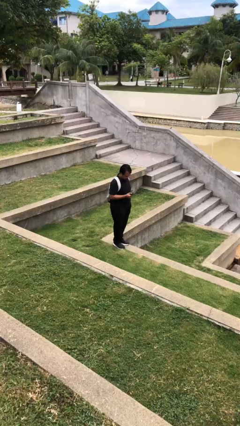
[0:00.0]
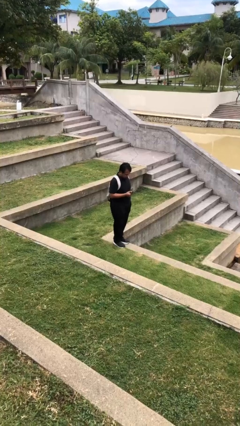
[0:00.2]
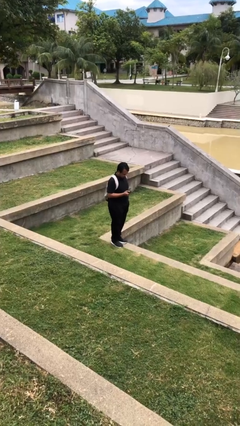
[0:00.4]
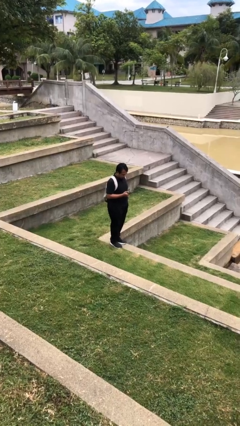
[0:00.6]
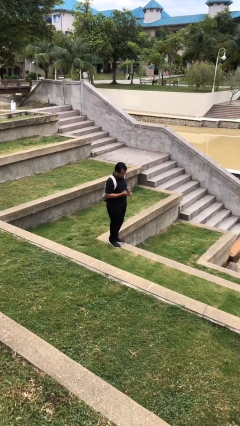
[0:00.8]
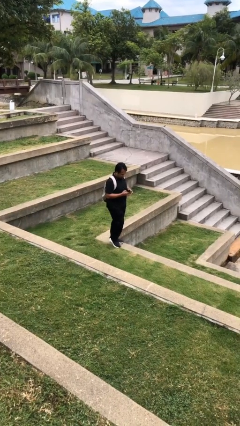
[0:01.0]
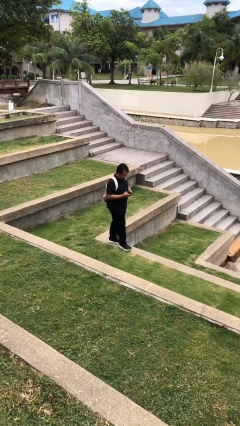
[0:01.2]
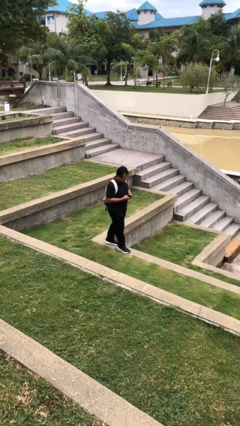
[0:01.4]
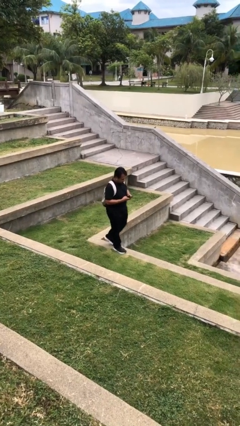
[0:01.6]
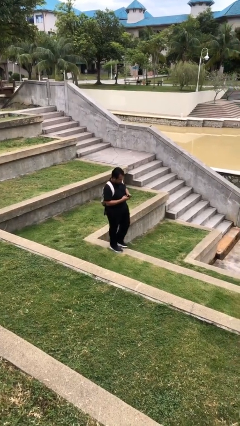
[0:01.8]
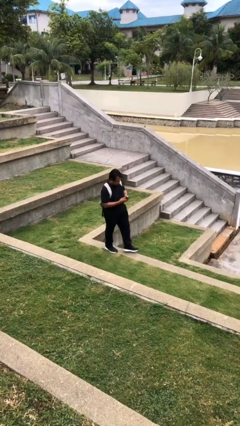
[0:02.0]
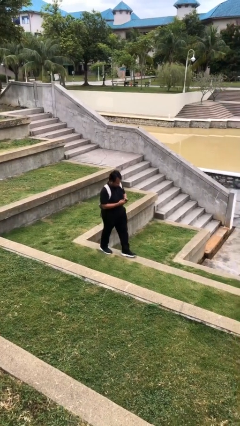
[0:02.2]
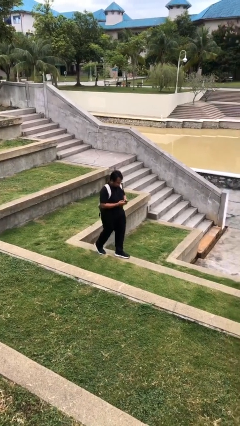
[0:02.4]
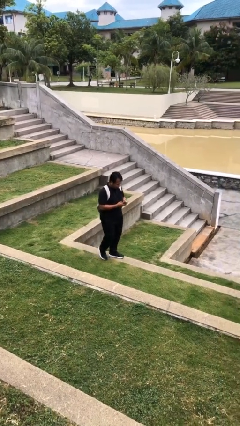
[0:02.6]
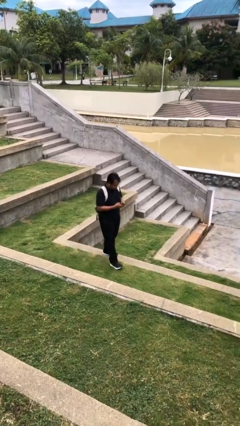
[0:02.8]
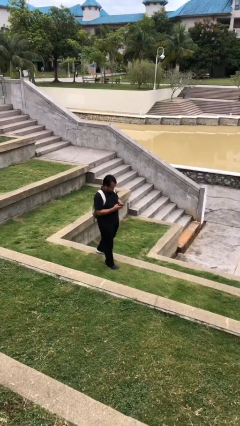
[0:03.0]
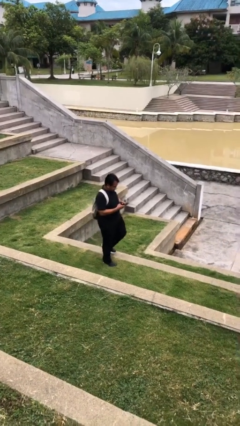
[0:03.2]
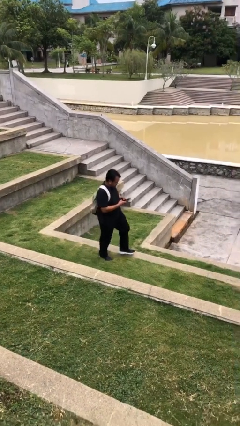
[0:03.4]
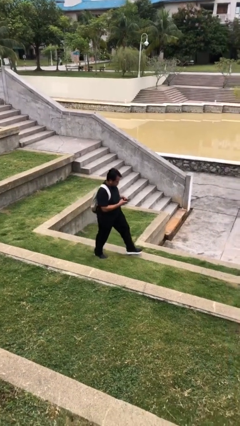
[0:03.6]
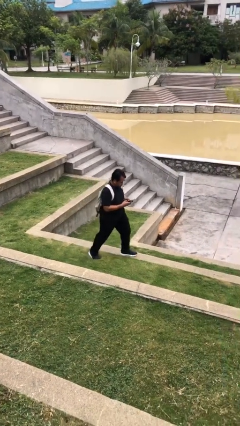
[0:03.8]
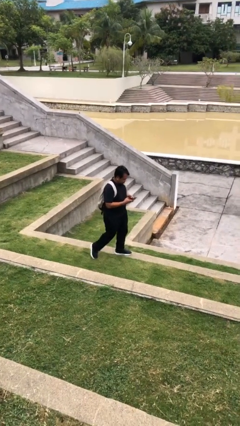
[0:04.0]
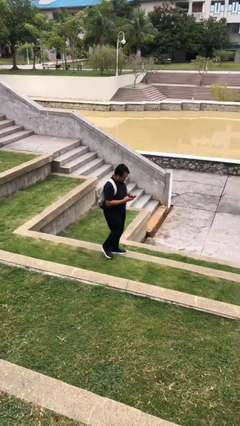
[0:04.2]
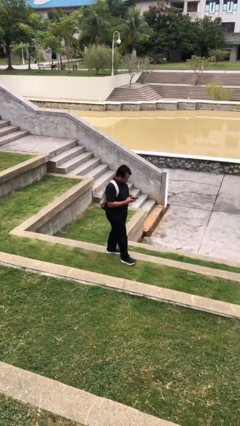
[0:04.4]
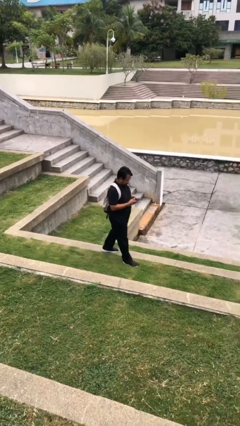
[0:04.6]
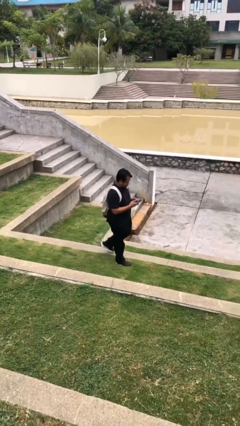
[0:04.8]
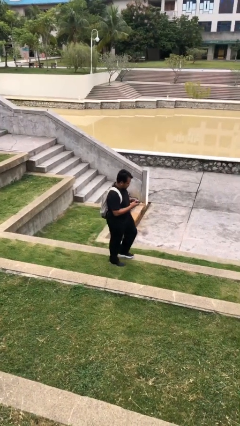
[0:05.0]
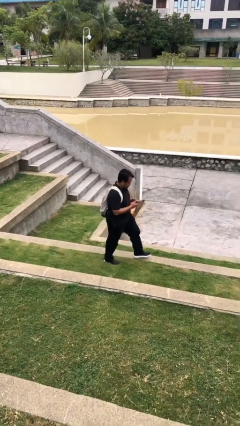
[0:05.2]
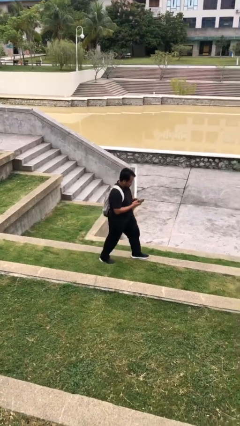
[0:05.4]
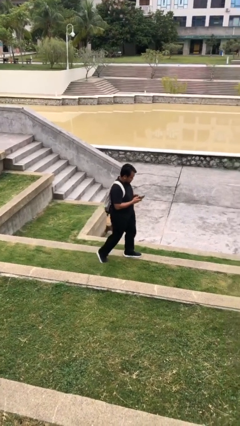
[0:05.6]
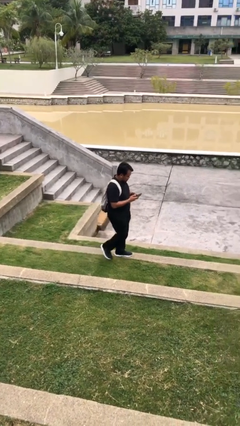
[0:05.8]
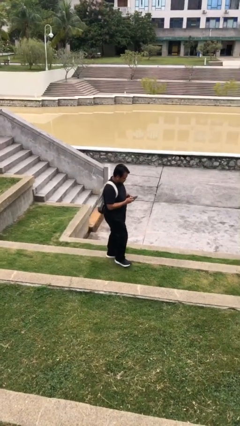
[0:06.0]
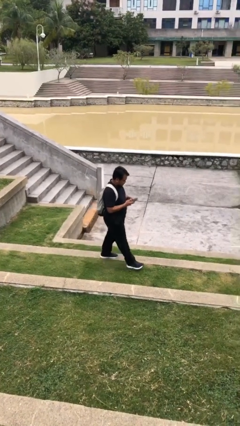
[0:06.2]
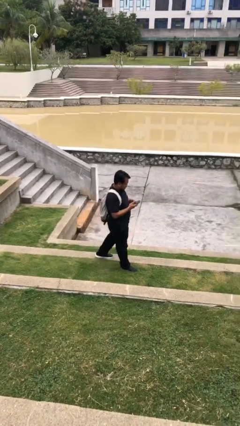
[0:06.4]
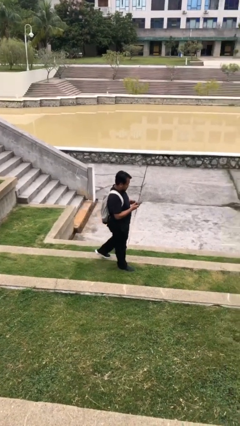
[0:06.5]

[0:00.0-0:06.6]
person texts on phone

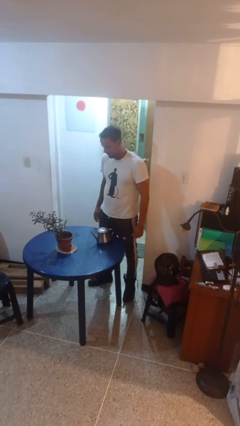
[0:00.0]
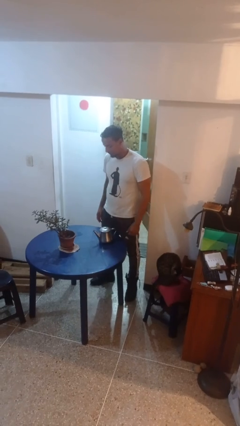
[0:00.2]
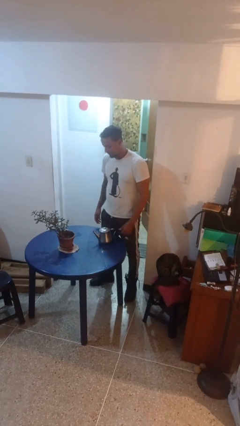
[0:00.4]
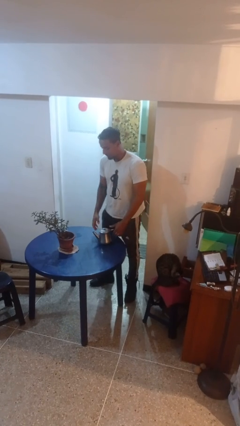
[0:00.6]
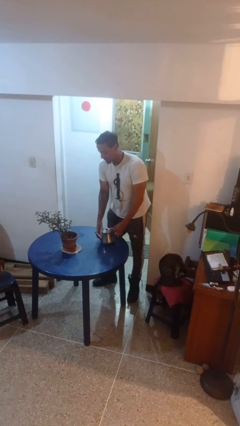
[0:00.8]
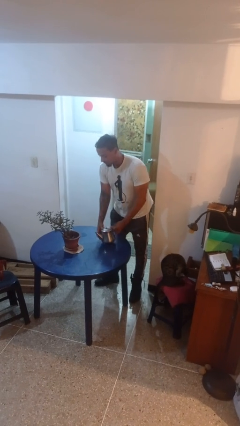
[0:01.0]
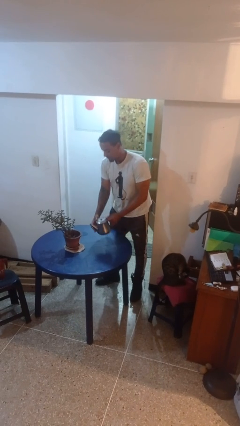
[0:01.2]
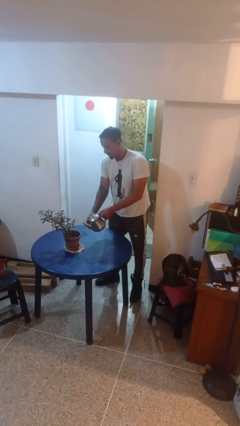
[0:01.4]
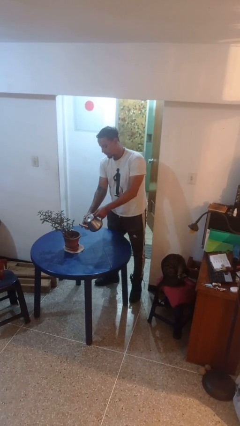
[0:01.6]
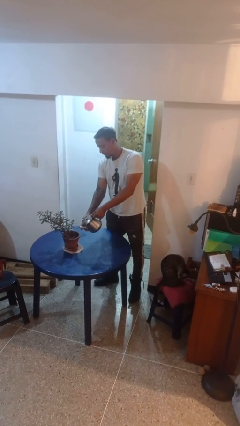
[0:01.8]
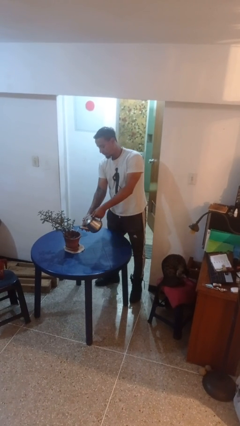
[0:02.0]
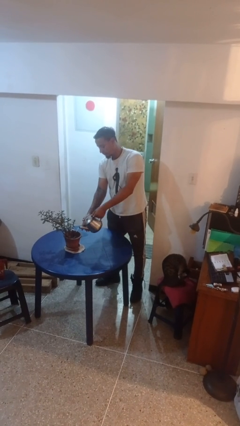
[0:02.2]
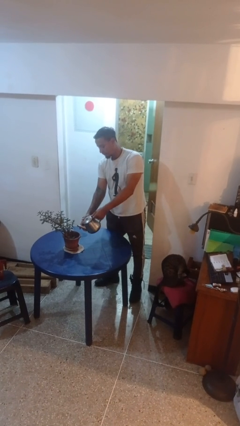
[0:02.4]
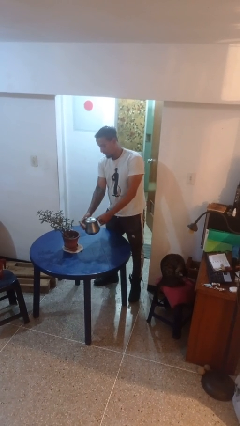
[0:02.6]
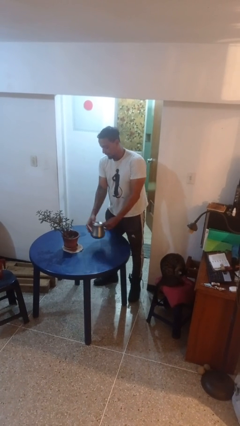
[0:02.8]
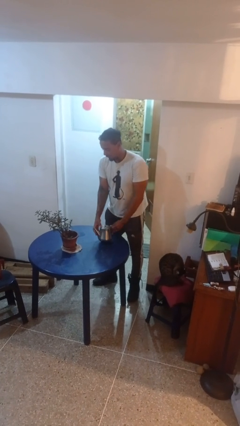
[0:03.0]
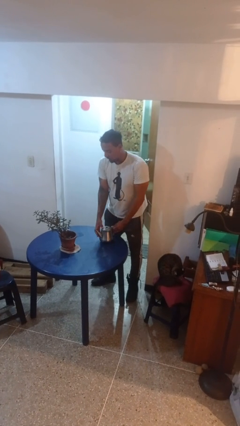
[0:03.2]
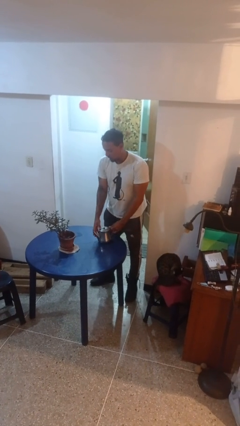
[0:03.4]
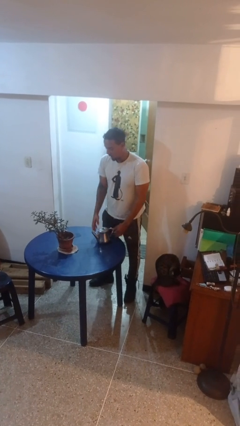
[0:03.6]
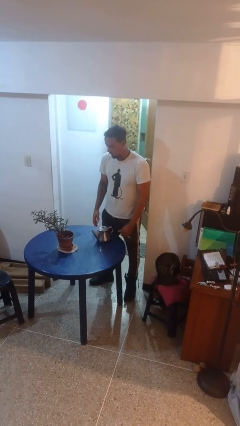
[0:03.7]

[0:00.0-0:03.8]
person waters houseplant

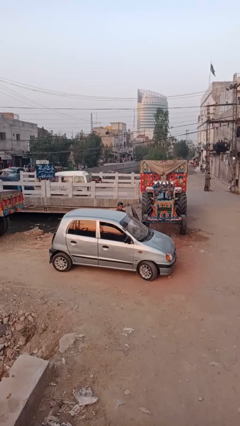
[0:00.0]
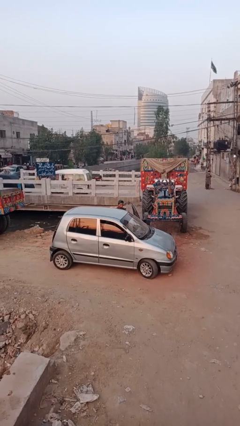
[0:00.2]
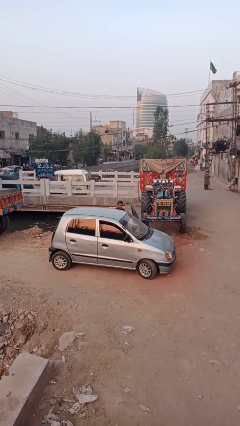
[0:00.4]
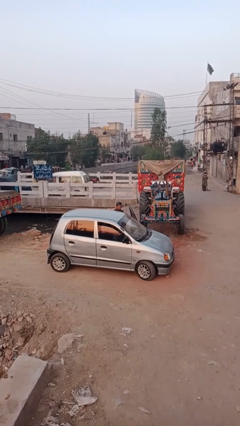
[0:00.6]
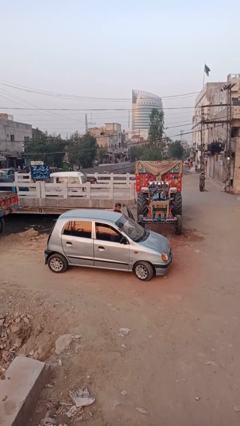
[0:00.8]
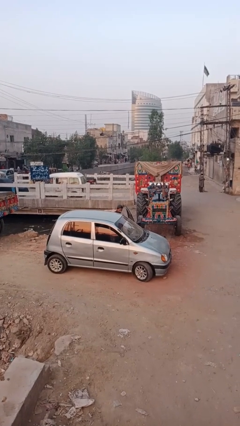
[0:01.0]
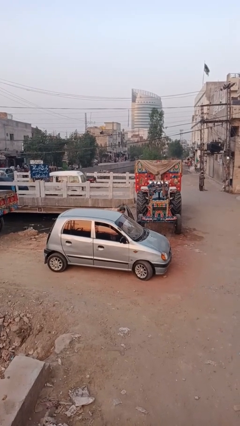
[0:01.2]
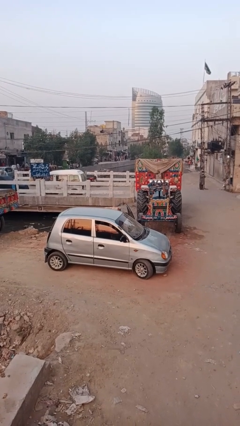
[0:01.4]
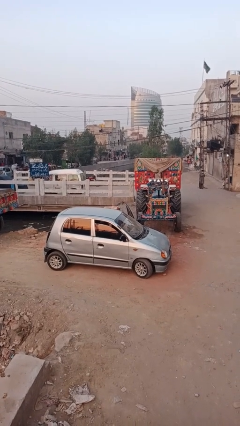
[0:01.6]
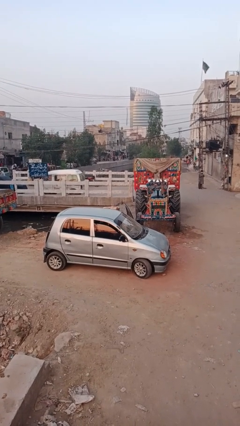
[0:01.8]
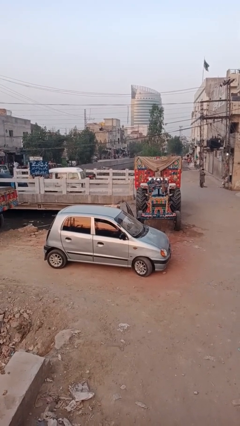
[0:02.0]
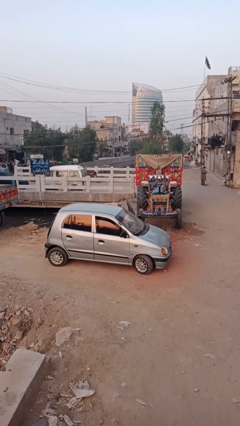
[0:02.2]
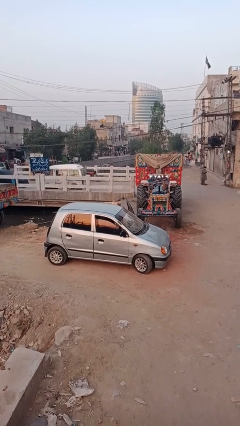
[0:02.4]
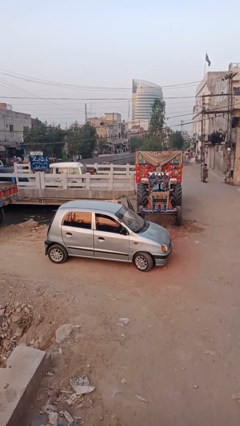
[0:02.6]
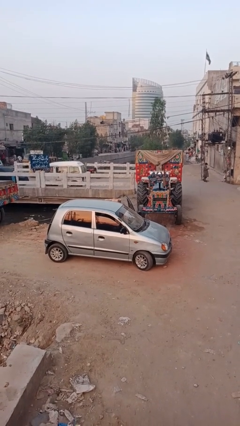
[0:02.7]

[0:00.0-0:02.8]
person enters car

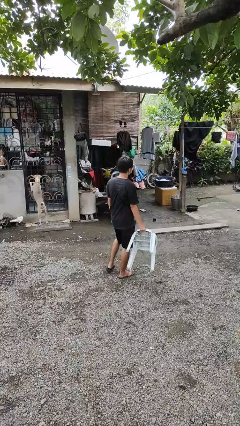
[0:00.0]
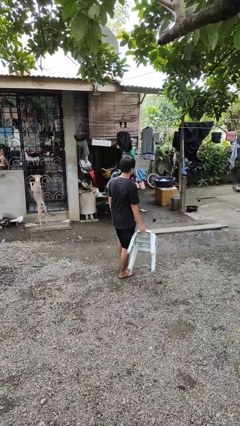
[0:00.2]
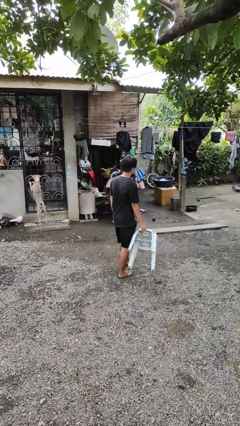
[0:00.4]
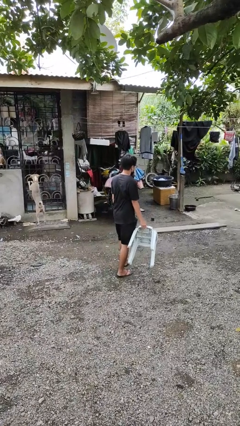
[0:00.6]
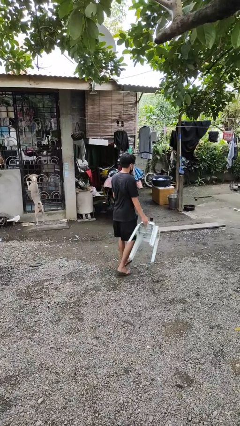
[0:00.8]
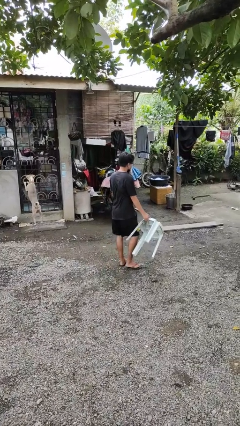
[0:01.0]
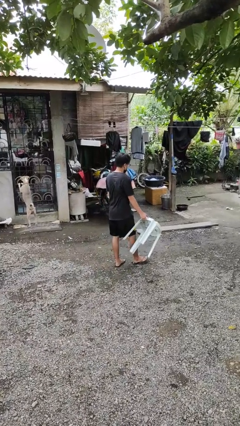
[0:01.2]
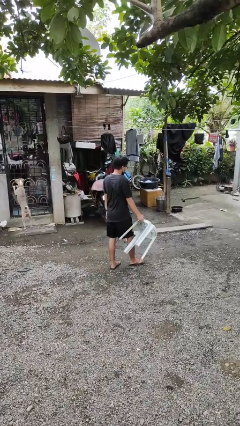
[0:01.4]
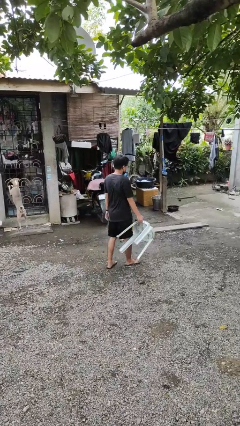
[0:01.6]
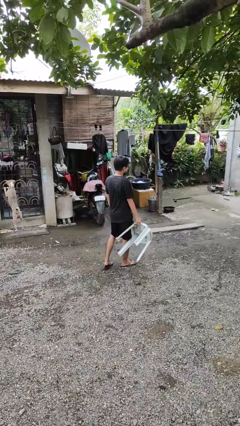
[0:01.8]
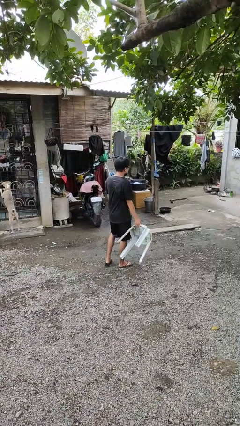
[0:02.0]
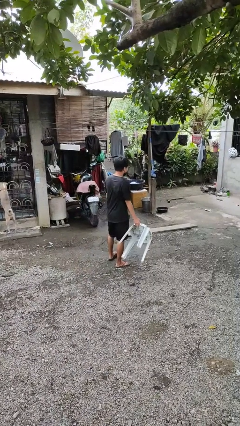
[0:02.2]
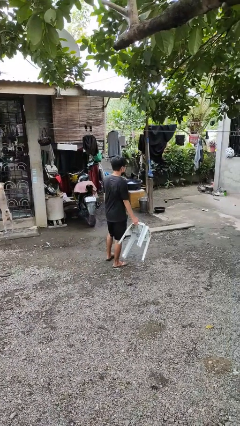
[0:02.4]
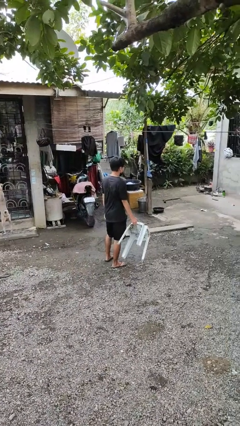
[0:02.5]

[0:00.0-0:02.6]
person carries furniture

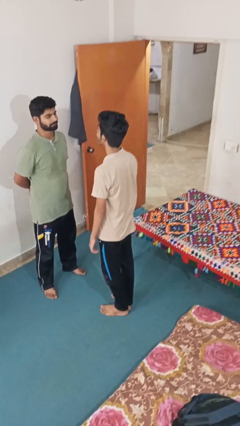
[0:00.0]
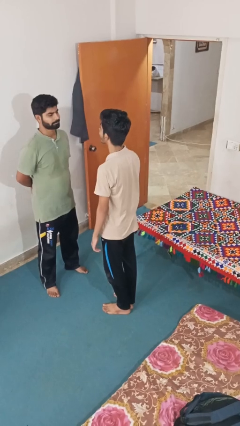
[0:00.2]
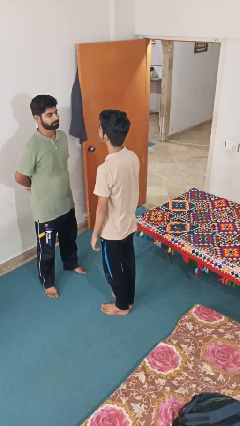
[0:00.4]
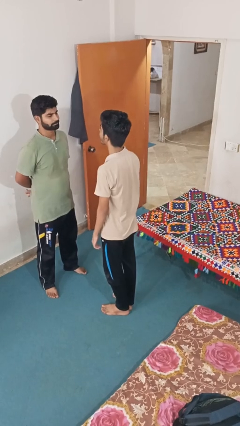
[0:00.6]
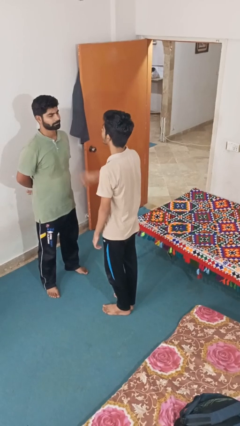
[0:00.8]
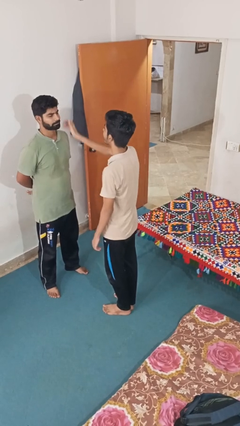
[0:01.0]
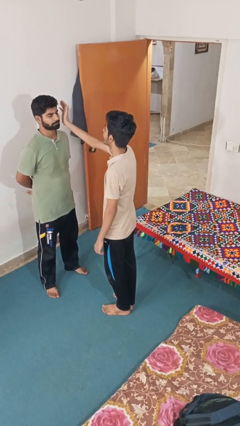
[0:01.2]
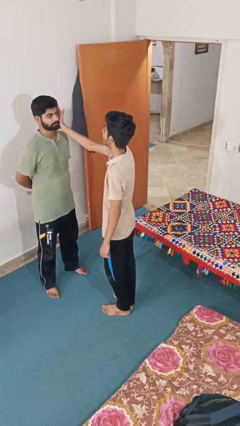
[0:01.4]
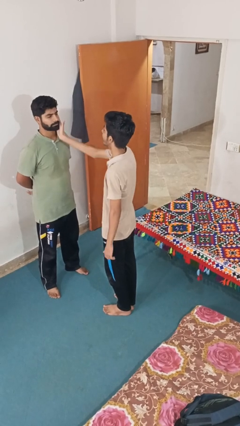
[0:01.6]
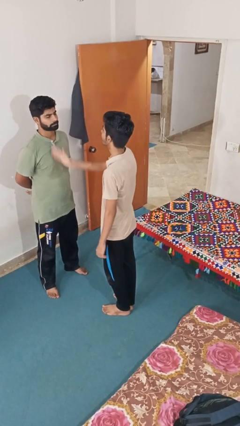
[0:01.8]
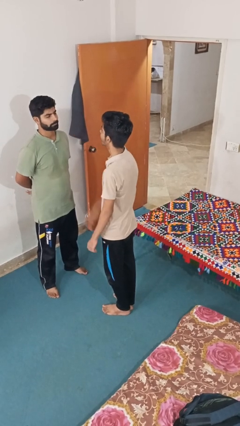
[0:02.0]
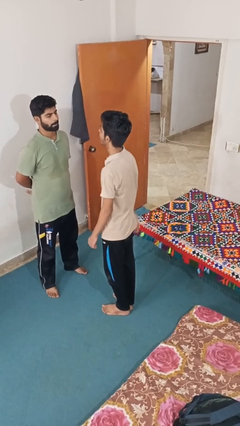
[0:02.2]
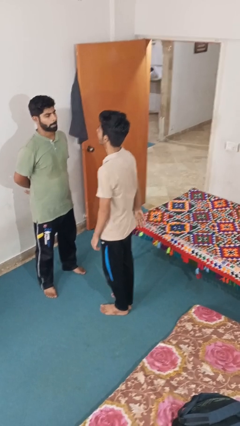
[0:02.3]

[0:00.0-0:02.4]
person touches face of person
